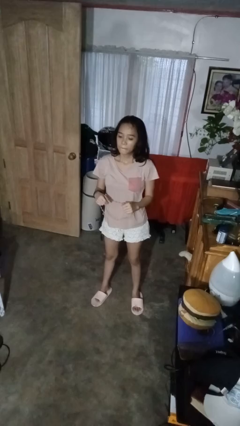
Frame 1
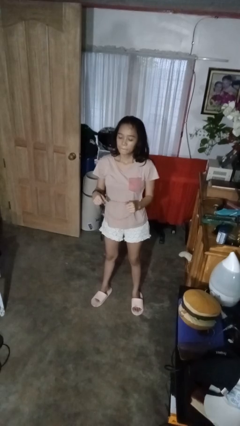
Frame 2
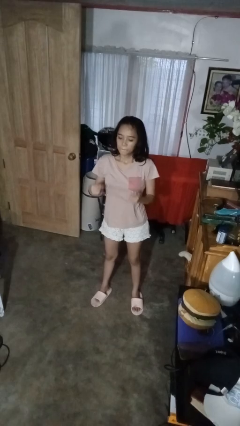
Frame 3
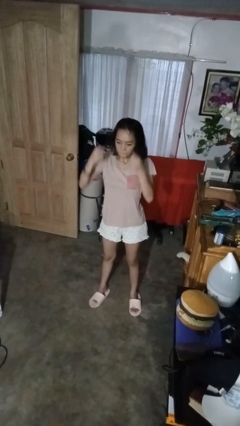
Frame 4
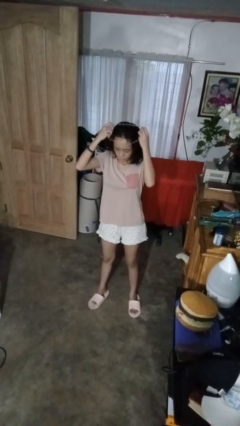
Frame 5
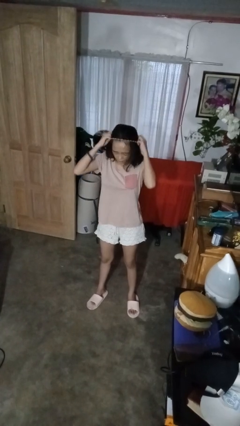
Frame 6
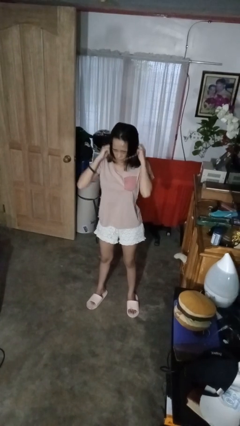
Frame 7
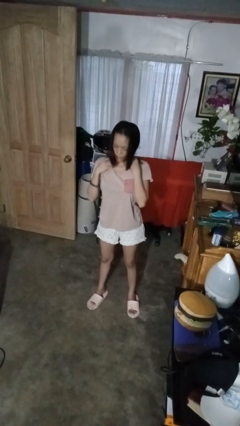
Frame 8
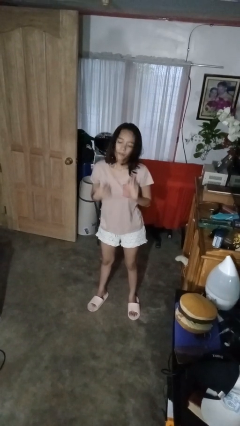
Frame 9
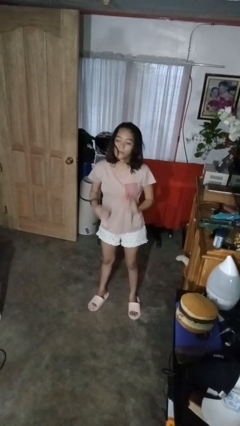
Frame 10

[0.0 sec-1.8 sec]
person puts on necklace

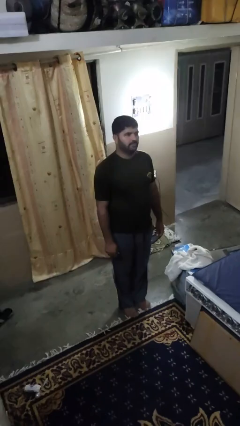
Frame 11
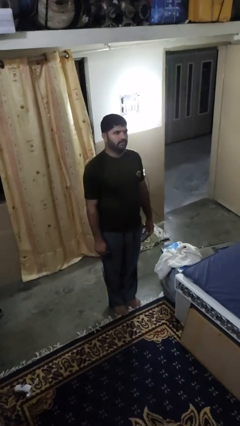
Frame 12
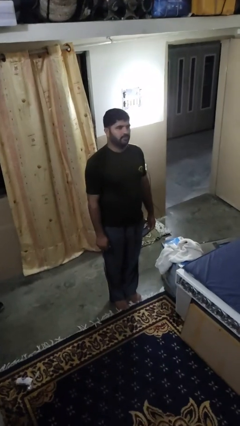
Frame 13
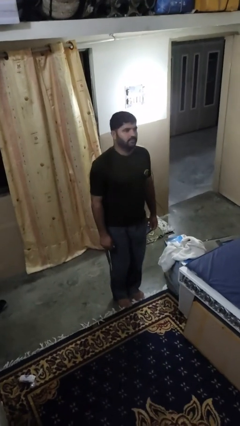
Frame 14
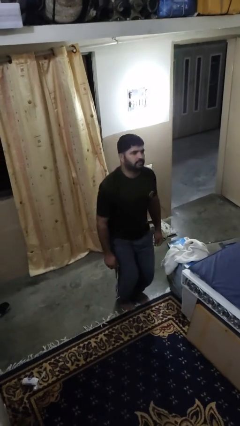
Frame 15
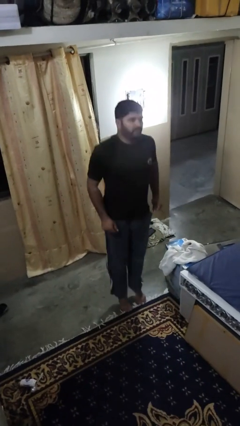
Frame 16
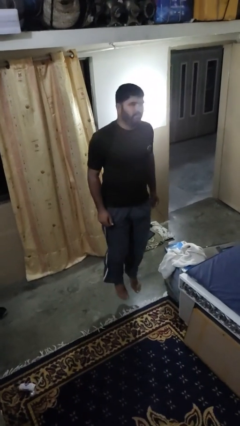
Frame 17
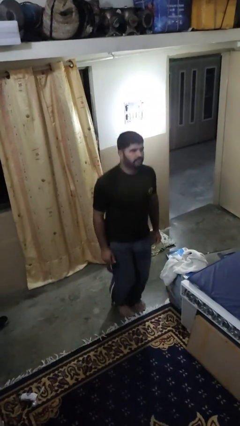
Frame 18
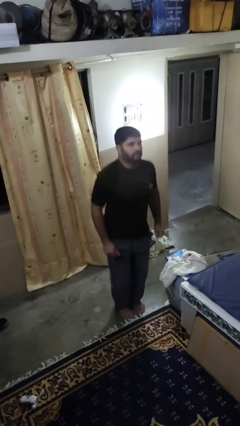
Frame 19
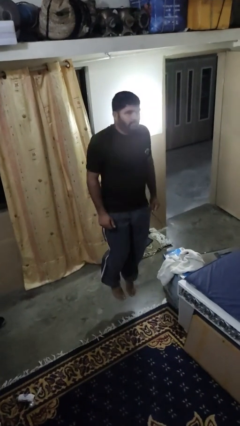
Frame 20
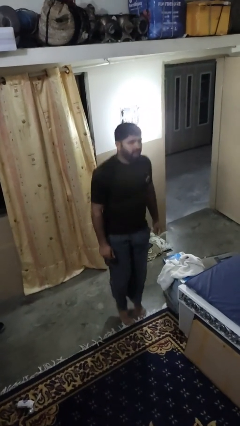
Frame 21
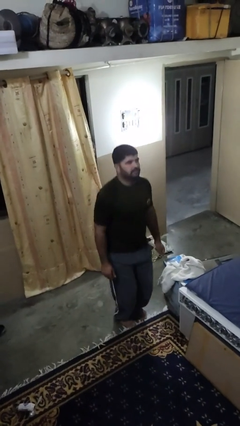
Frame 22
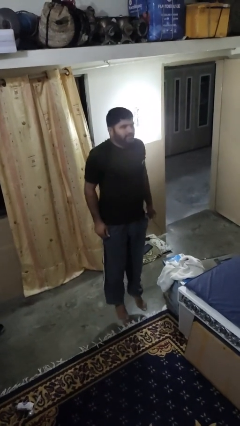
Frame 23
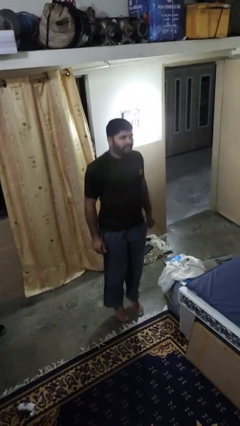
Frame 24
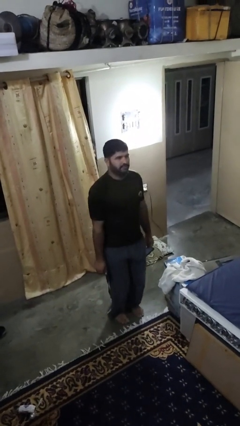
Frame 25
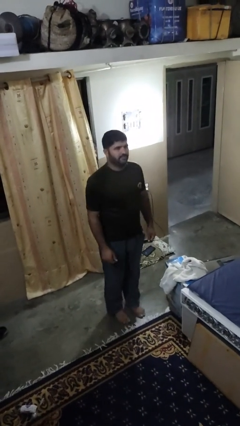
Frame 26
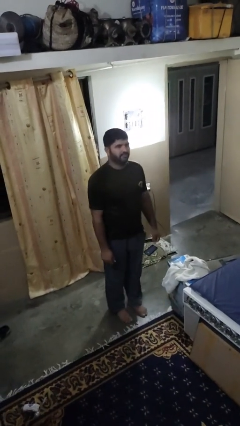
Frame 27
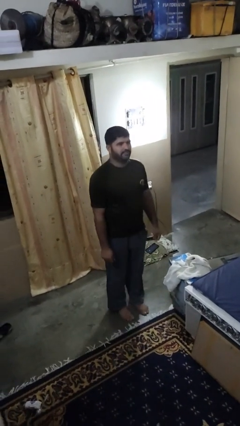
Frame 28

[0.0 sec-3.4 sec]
person jumps

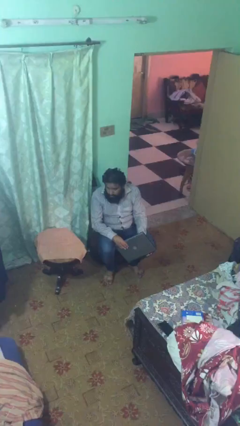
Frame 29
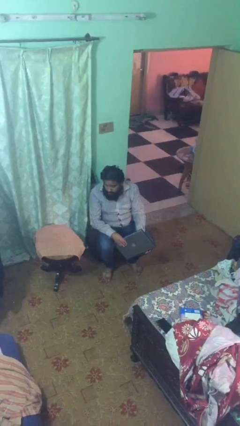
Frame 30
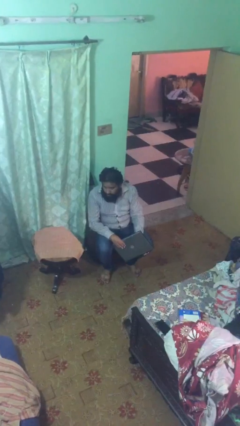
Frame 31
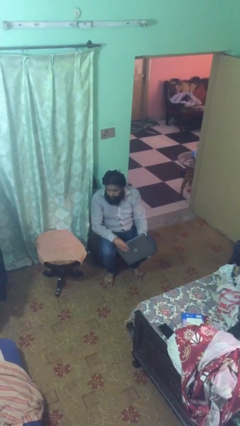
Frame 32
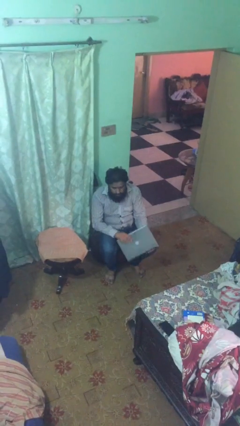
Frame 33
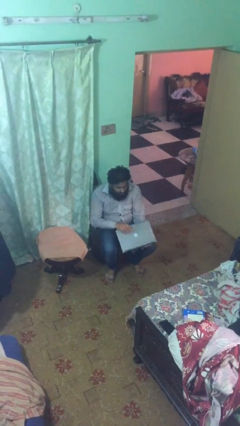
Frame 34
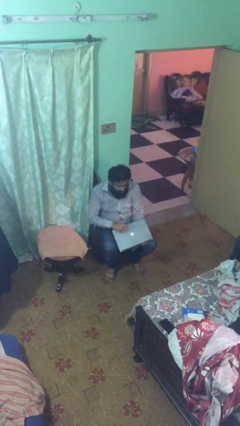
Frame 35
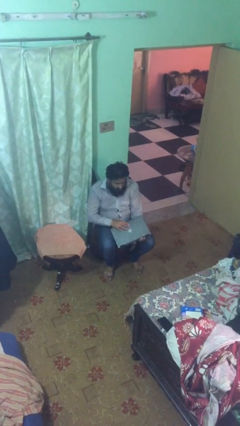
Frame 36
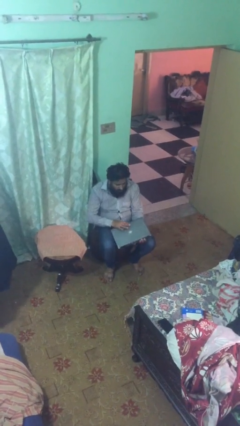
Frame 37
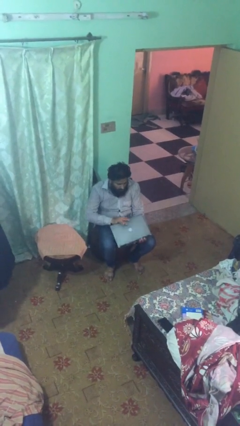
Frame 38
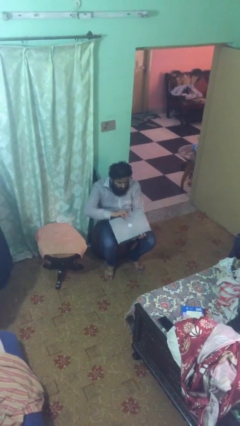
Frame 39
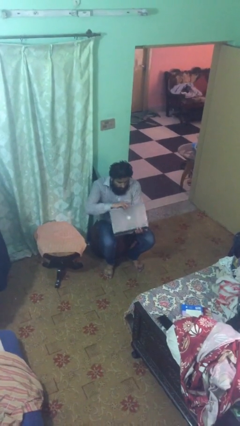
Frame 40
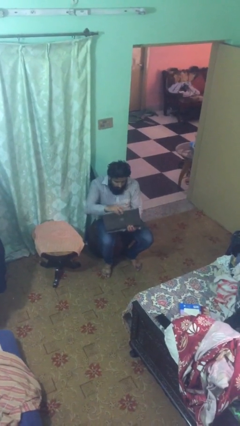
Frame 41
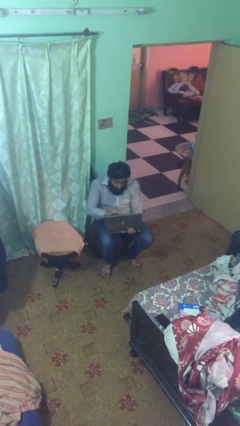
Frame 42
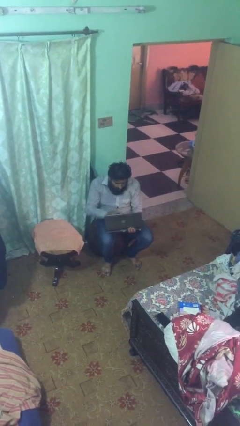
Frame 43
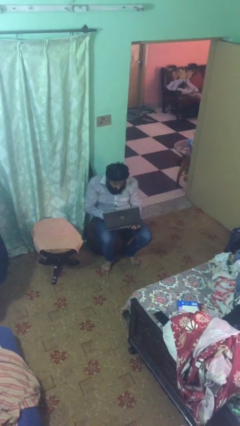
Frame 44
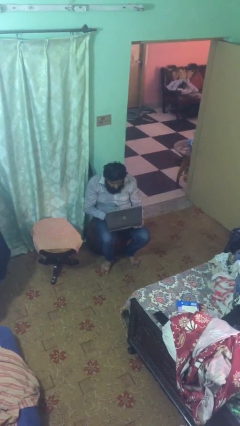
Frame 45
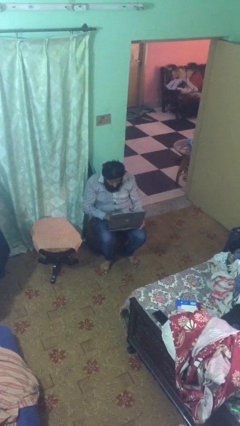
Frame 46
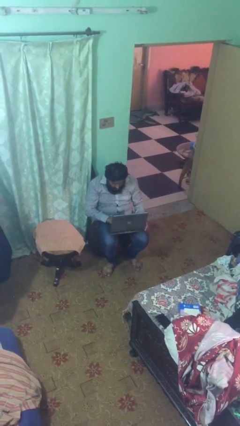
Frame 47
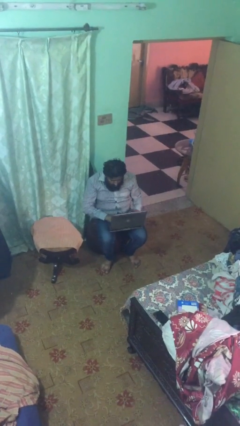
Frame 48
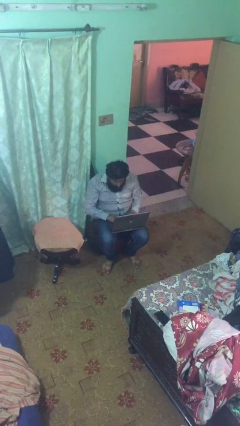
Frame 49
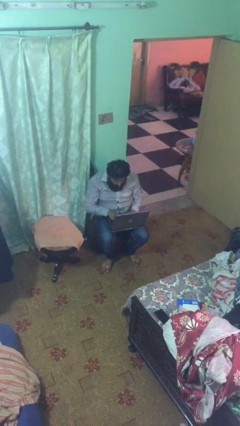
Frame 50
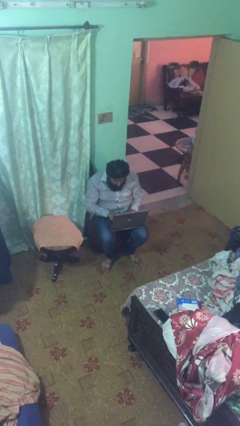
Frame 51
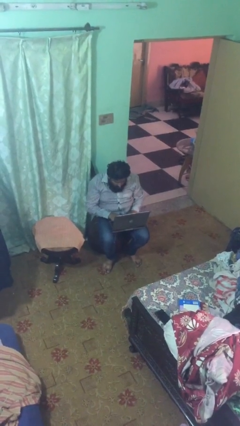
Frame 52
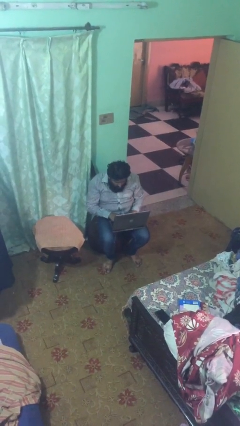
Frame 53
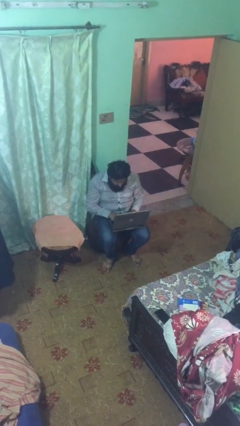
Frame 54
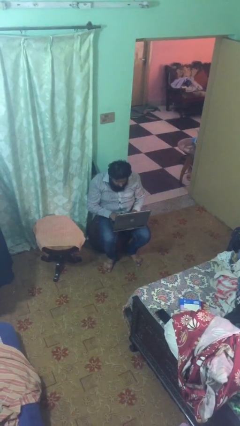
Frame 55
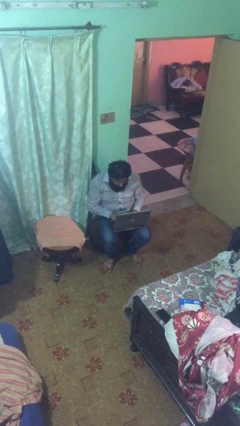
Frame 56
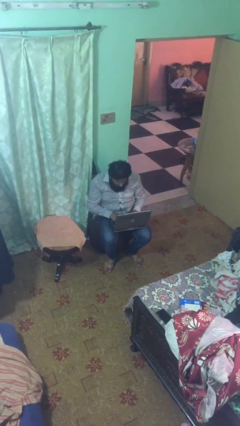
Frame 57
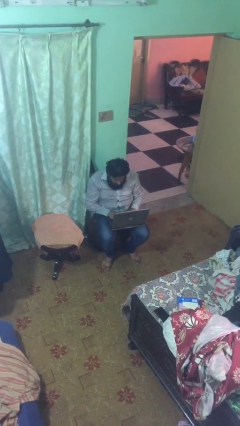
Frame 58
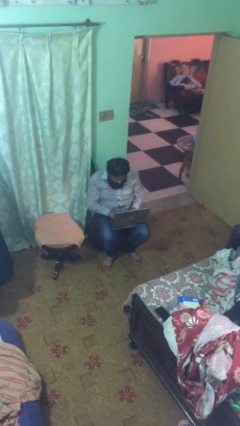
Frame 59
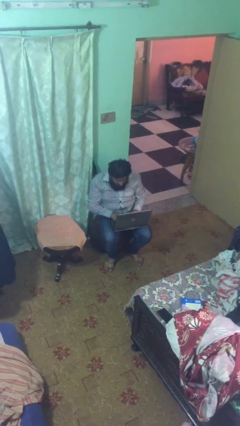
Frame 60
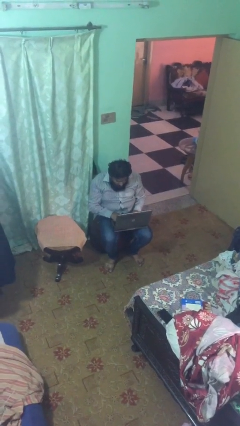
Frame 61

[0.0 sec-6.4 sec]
person interacts with laptop

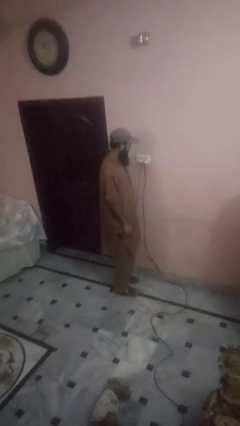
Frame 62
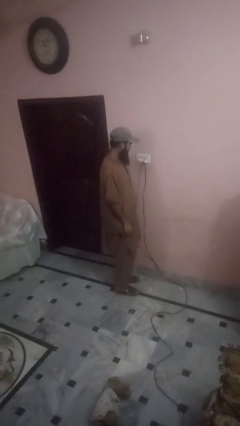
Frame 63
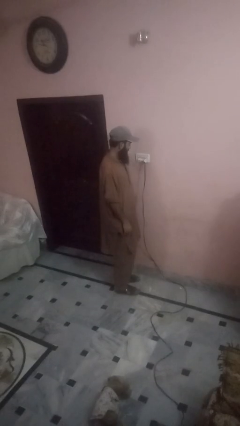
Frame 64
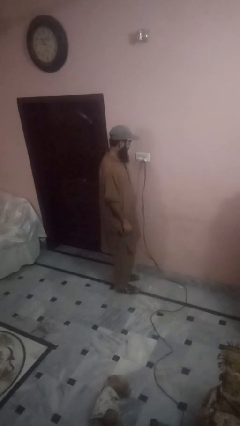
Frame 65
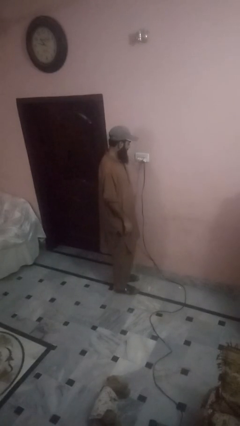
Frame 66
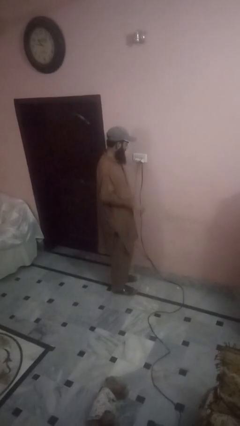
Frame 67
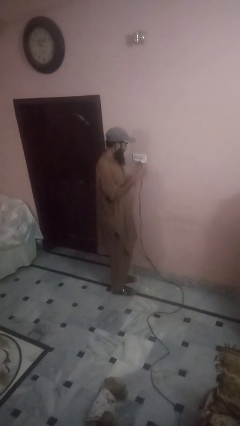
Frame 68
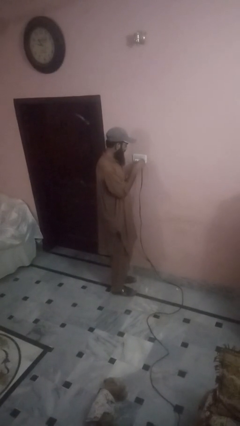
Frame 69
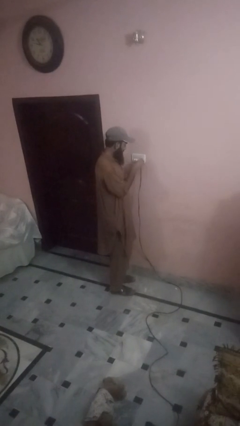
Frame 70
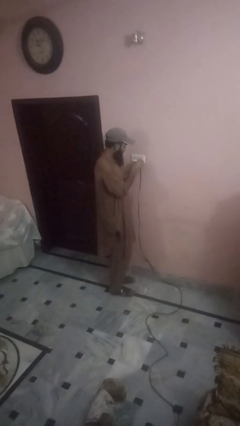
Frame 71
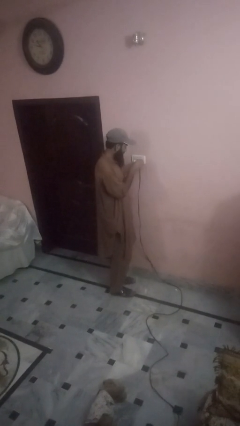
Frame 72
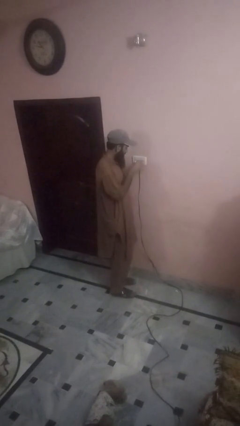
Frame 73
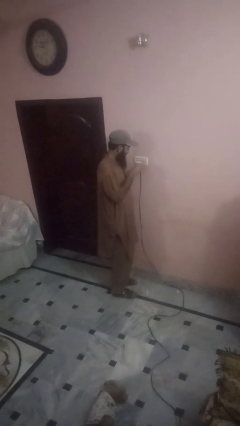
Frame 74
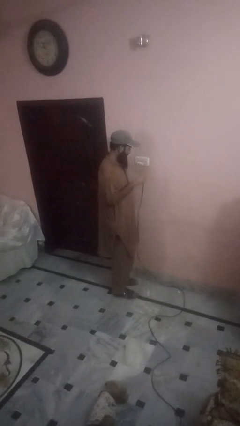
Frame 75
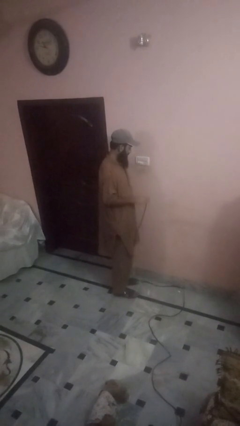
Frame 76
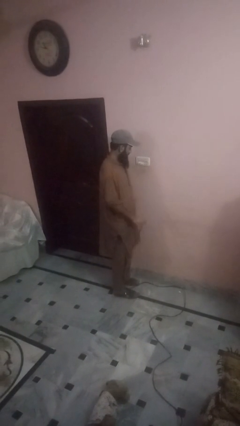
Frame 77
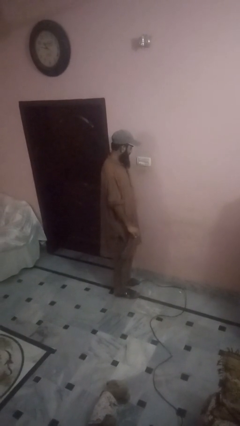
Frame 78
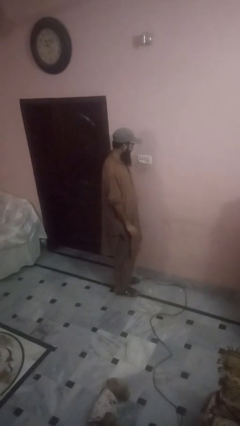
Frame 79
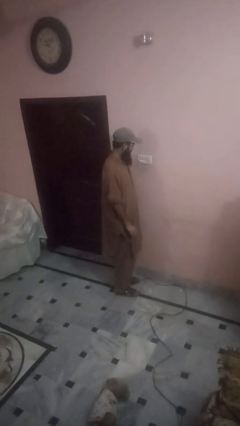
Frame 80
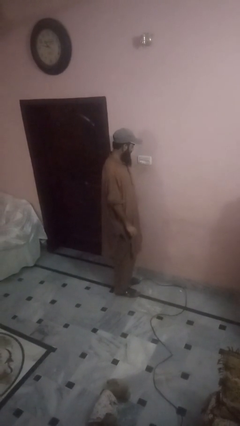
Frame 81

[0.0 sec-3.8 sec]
person unplugs from electrical socket

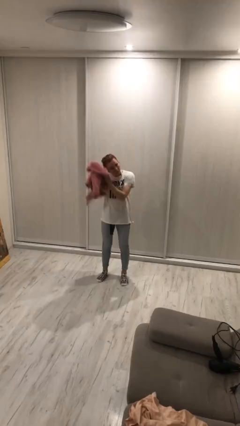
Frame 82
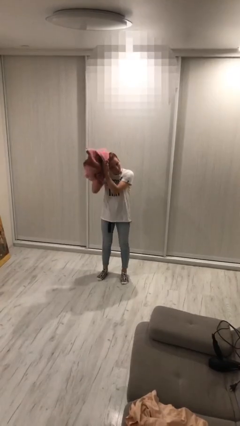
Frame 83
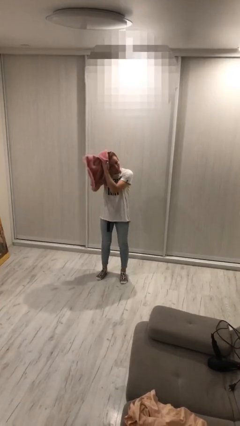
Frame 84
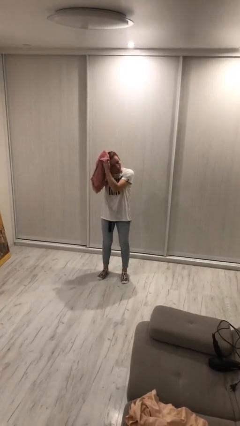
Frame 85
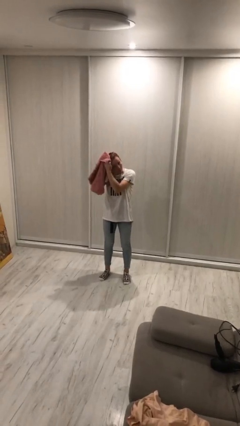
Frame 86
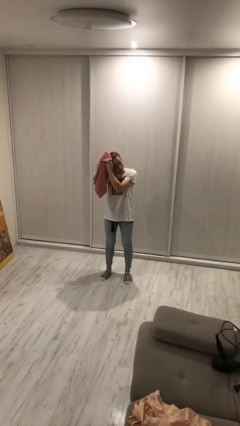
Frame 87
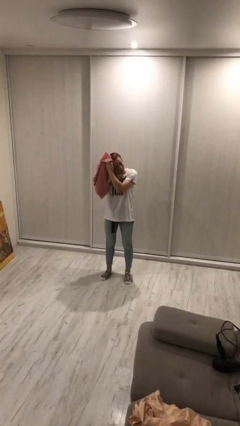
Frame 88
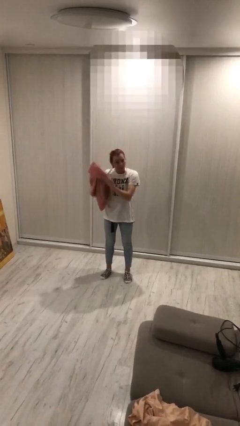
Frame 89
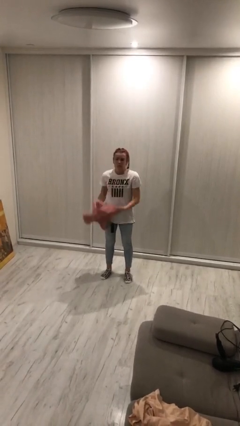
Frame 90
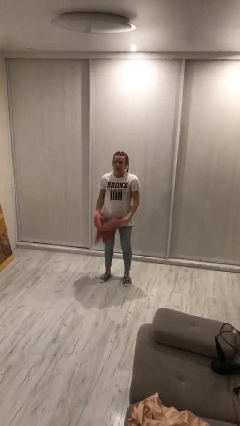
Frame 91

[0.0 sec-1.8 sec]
person dries hair with towel

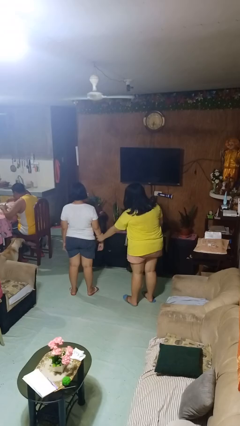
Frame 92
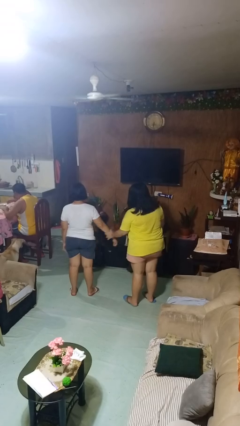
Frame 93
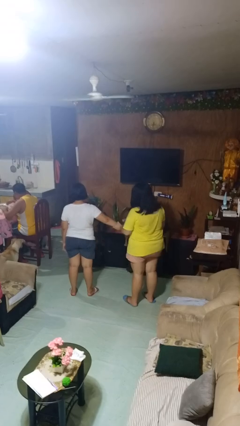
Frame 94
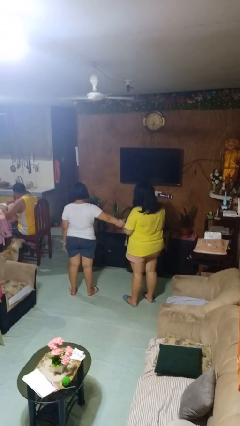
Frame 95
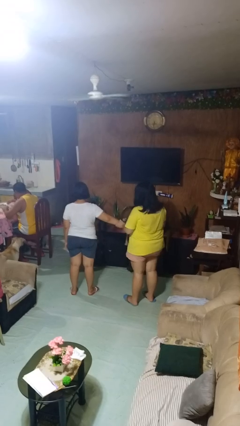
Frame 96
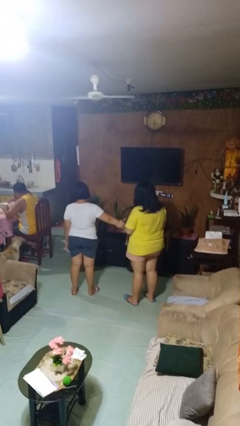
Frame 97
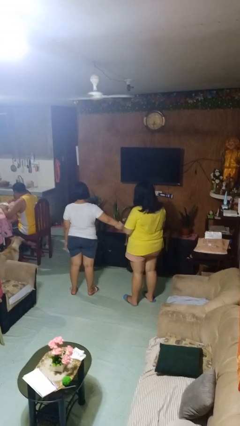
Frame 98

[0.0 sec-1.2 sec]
person grabs person by forearm
